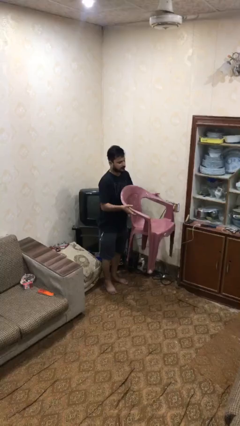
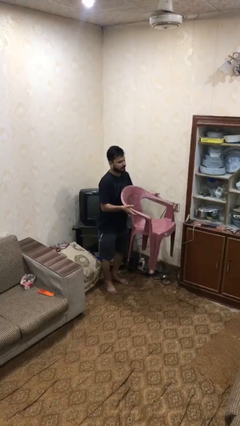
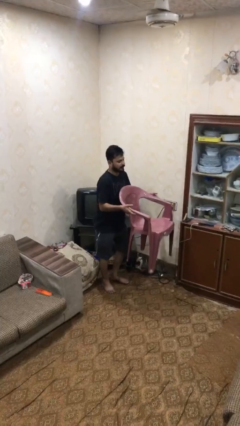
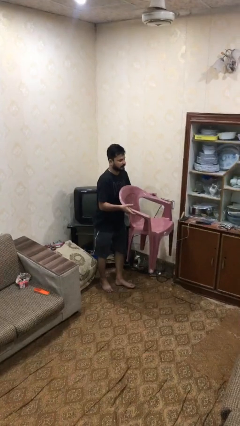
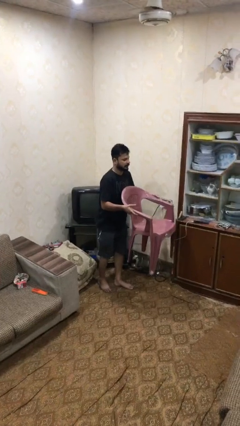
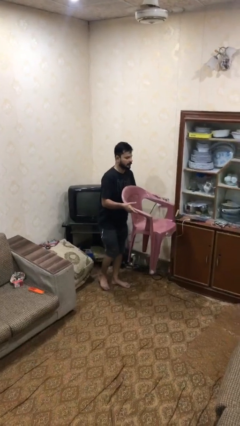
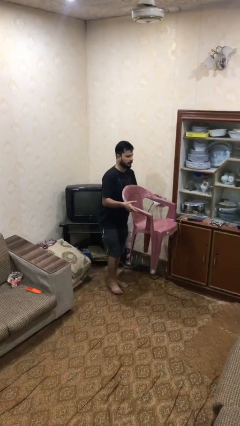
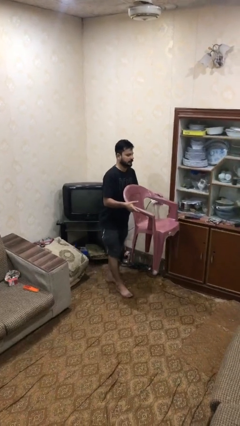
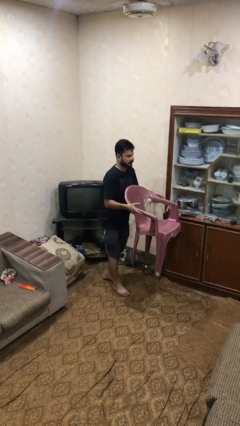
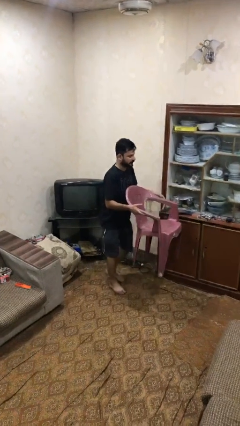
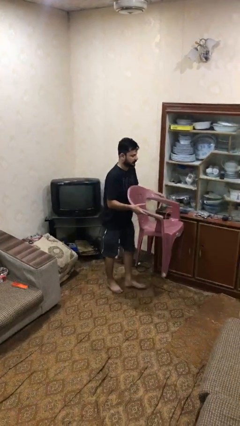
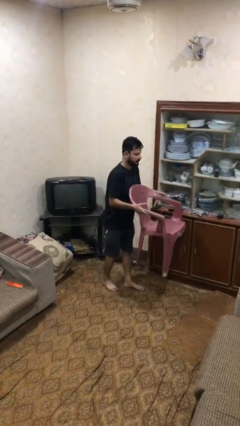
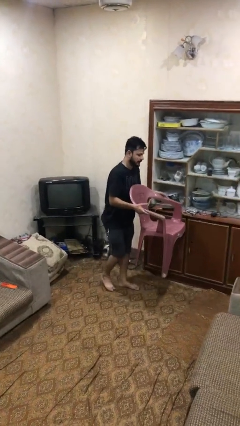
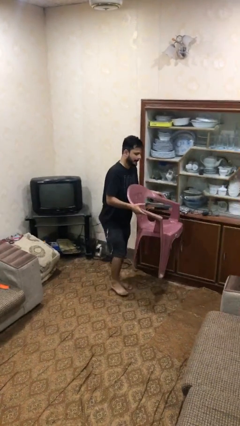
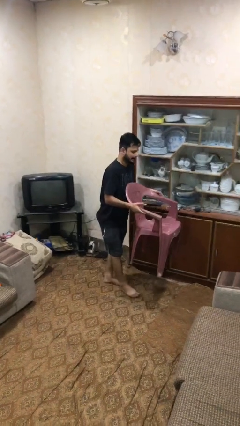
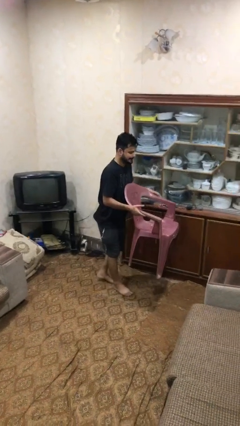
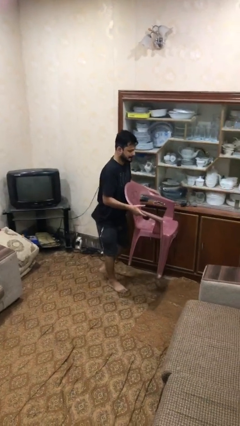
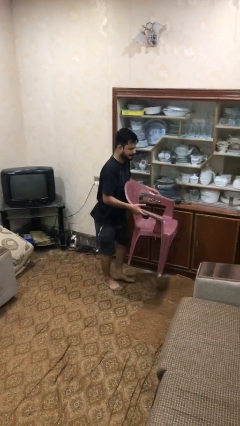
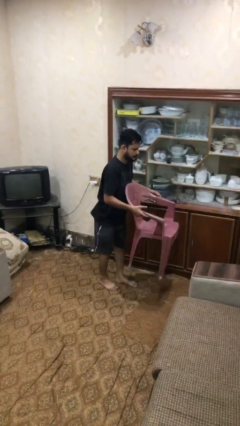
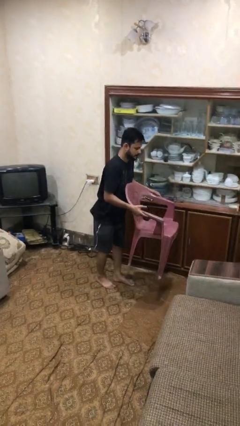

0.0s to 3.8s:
person carries heavy object

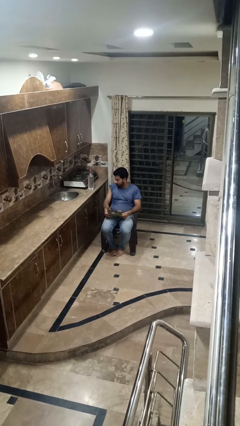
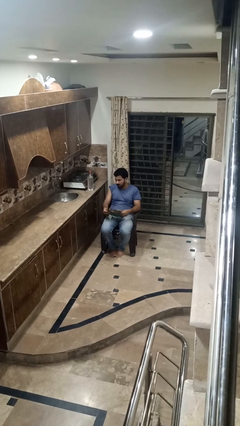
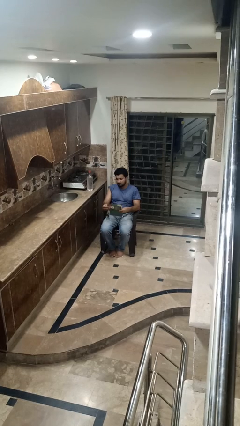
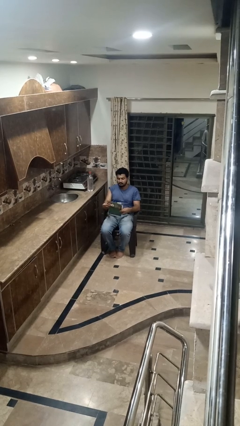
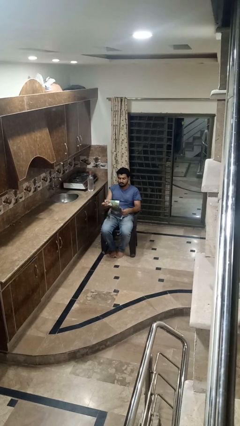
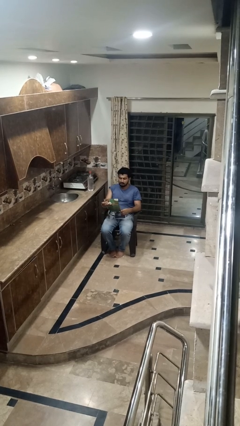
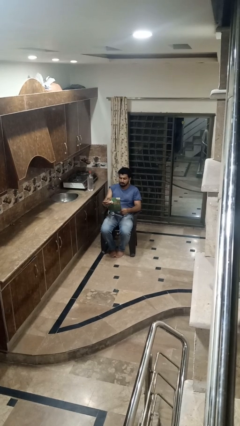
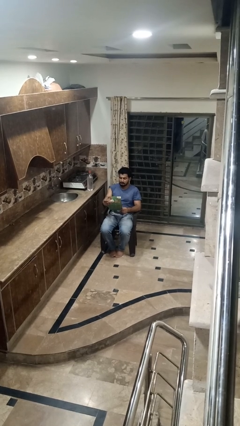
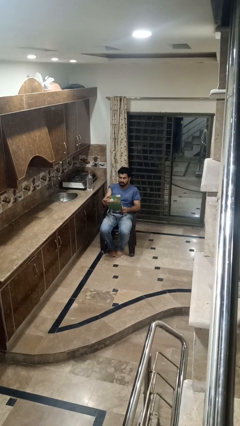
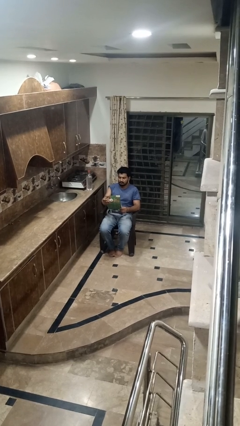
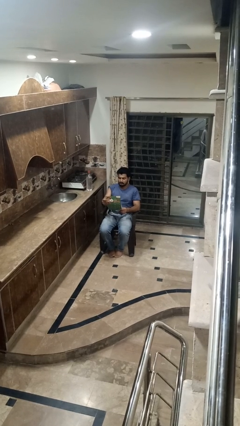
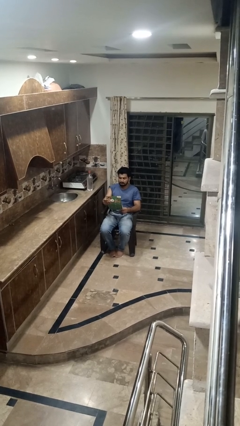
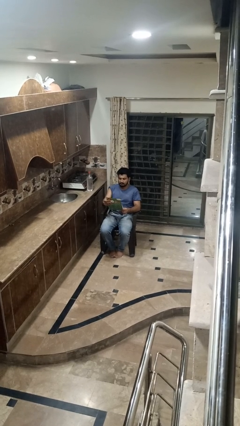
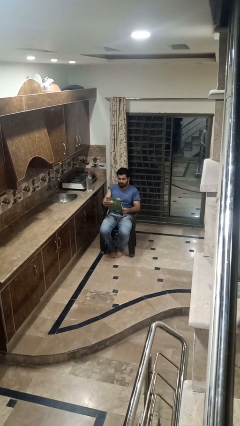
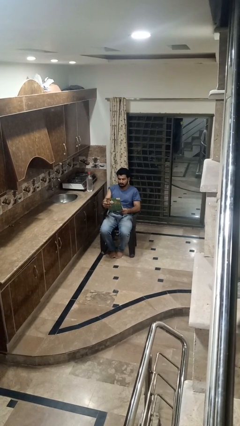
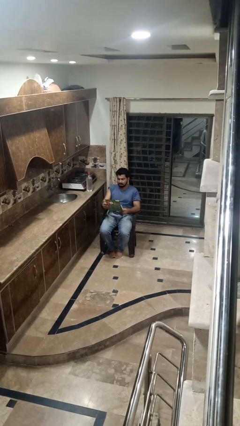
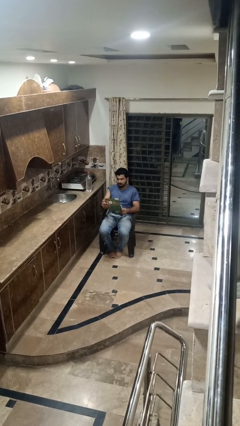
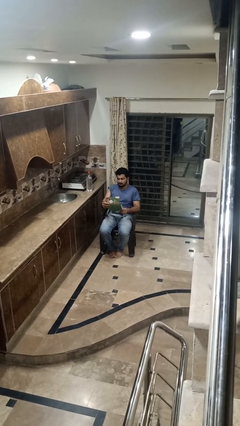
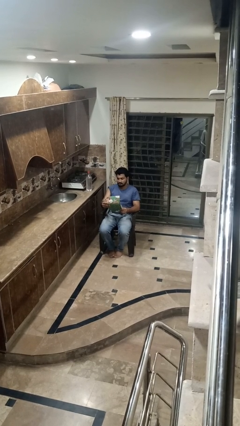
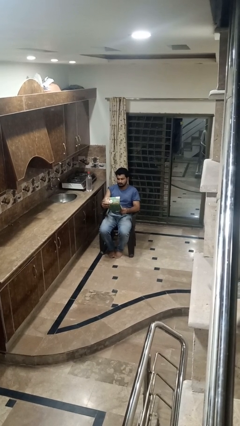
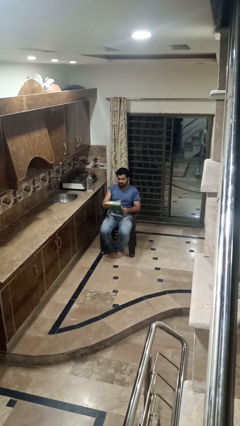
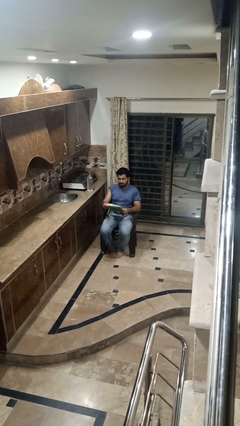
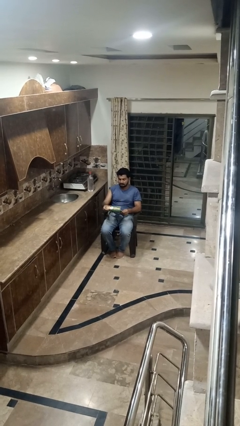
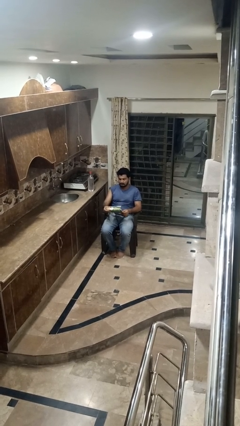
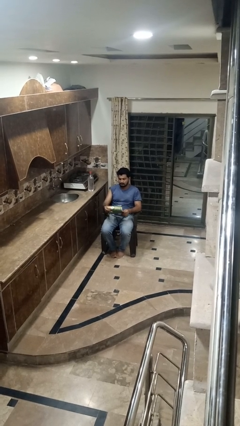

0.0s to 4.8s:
person reads newspaper

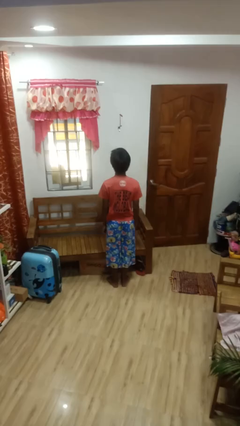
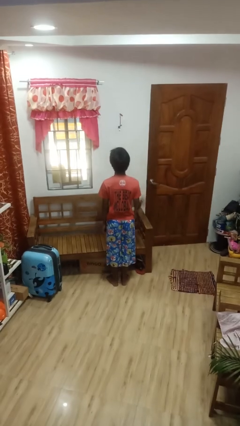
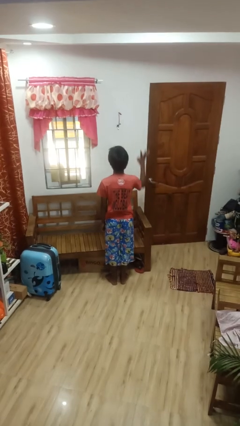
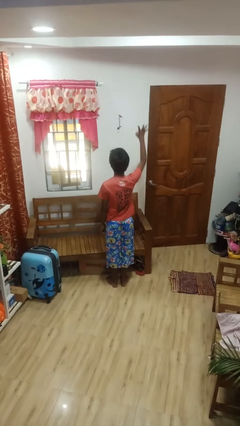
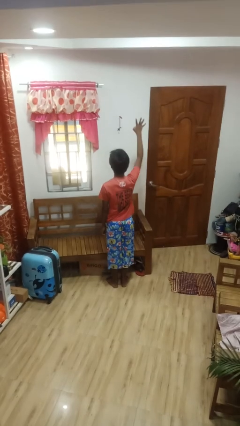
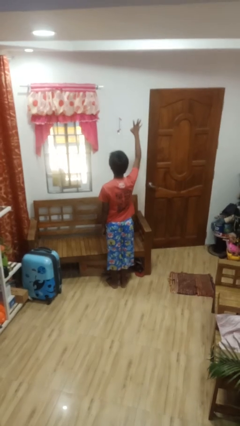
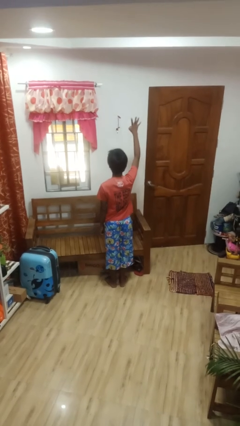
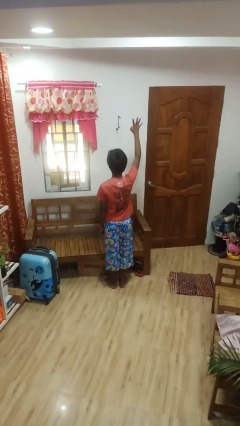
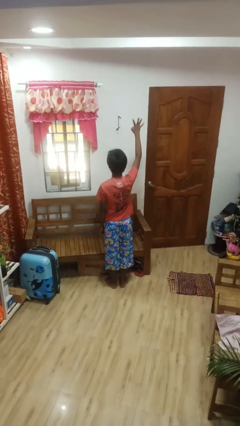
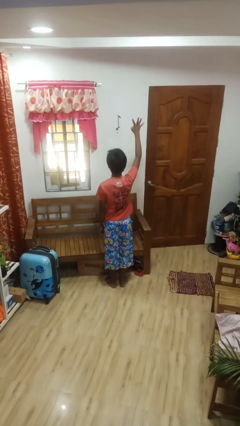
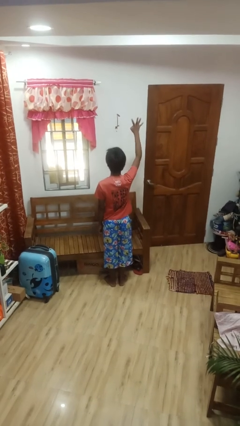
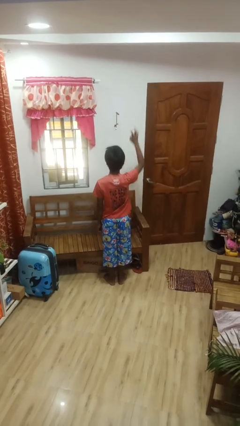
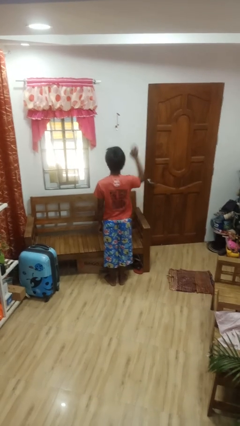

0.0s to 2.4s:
person gestures number four

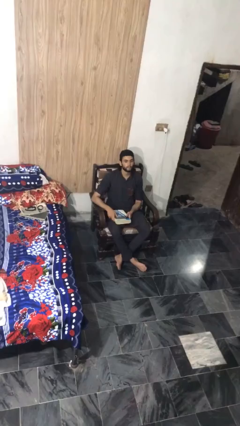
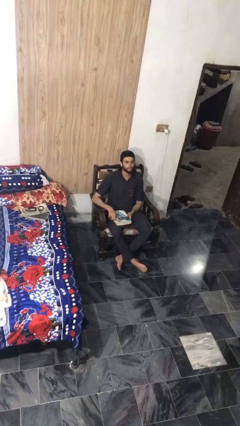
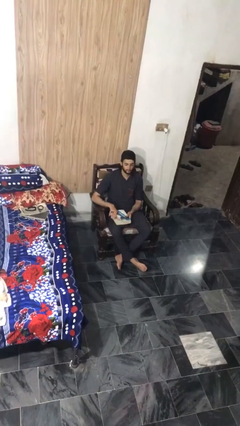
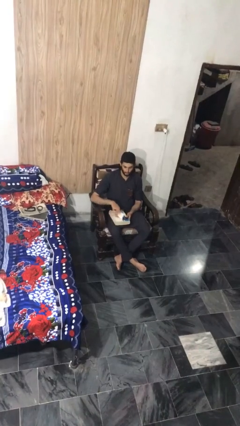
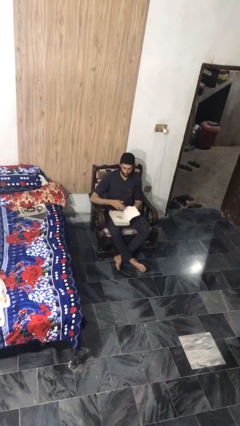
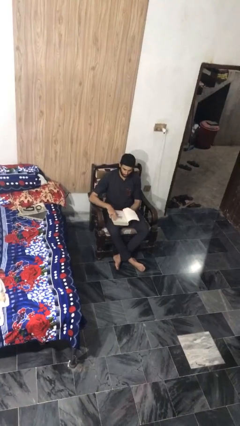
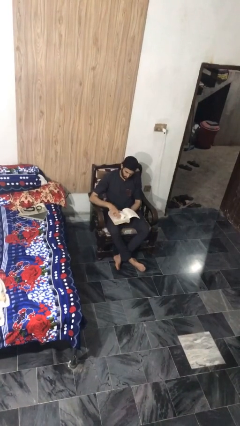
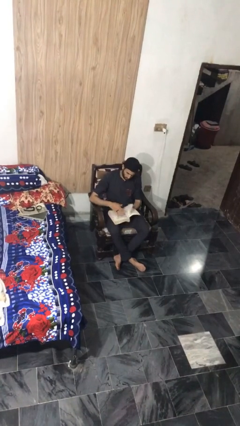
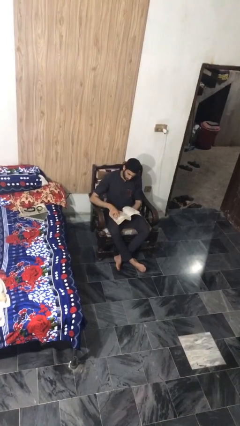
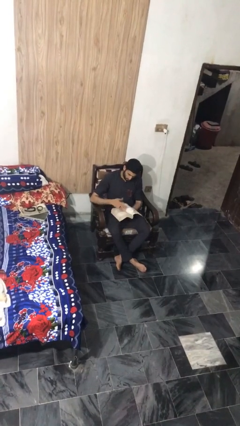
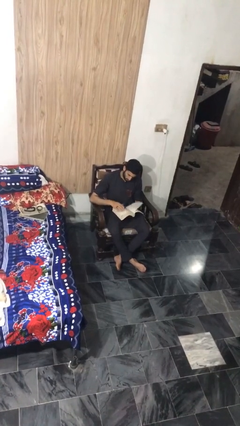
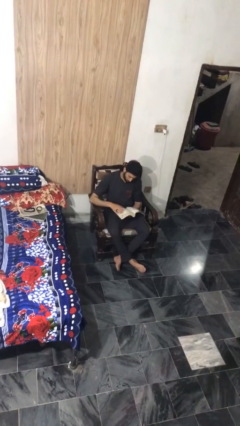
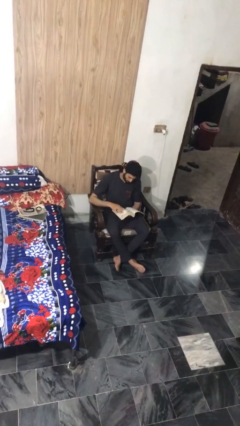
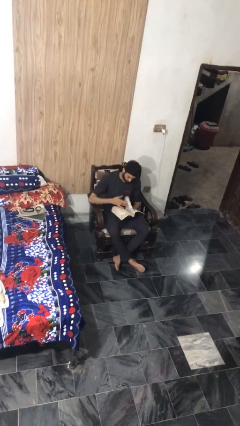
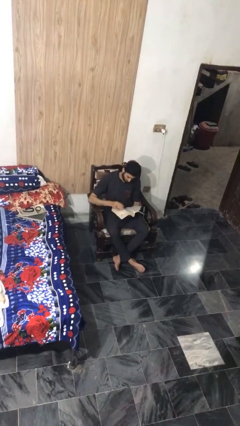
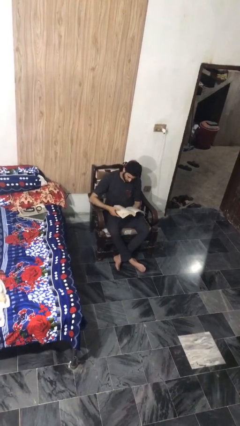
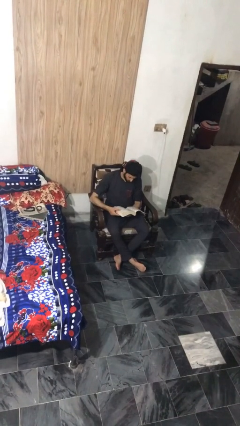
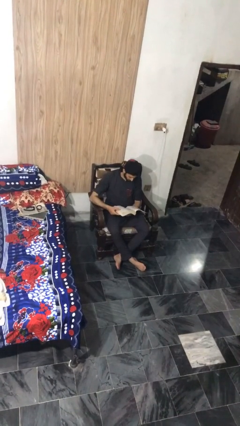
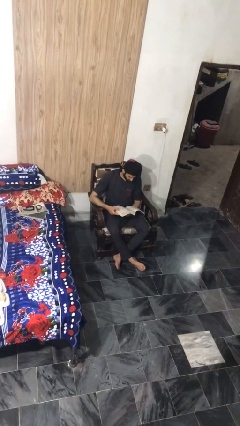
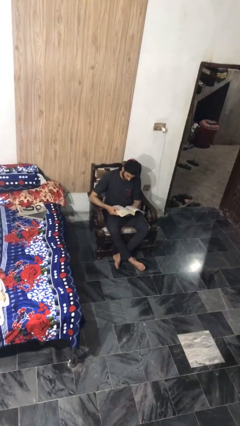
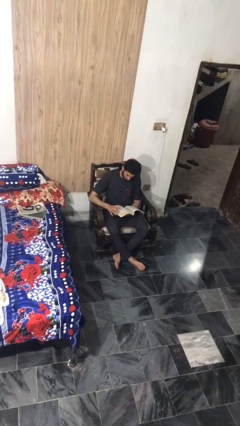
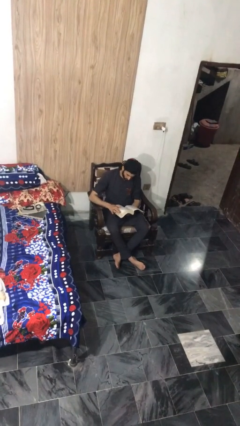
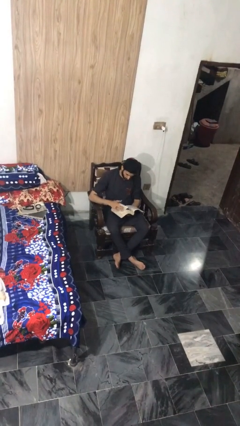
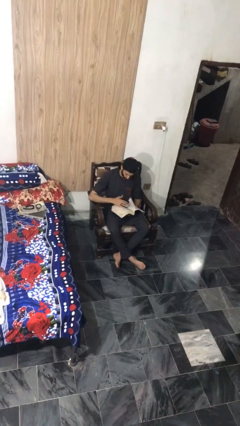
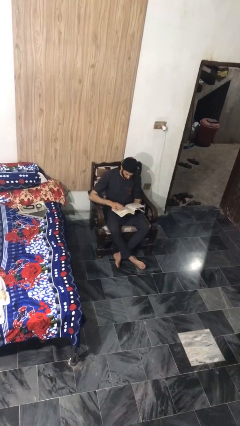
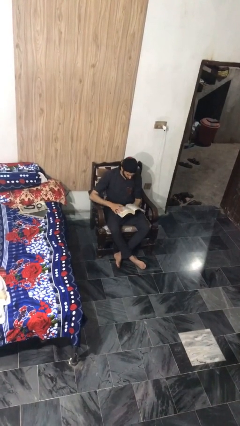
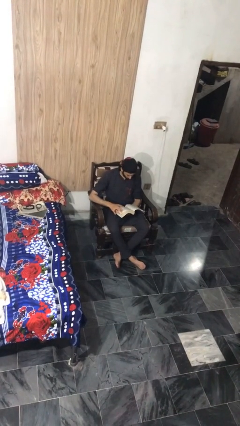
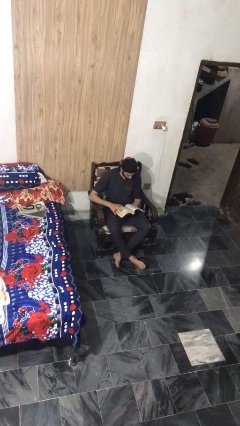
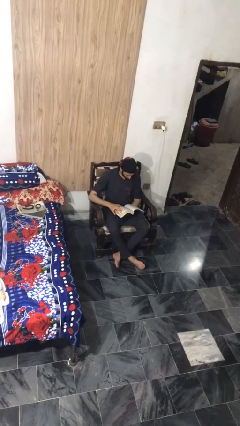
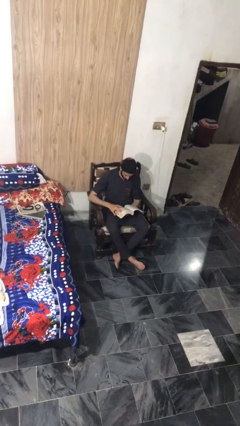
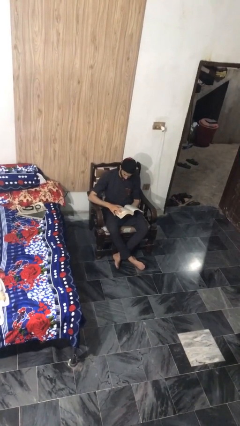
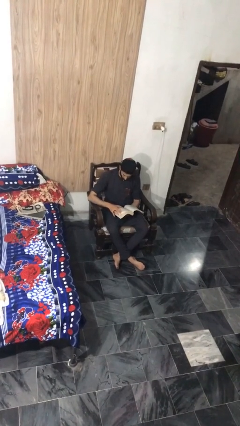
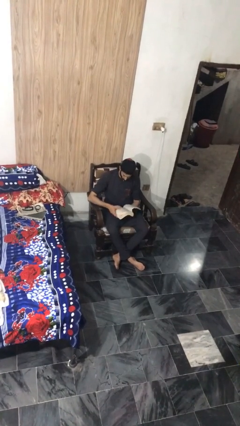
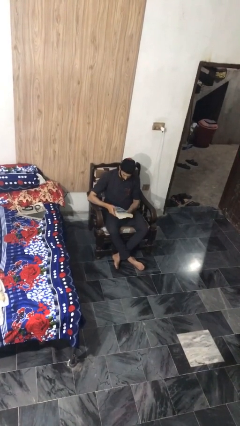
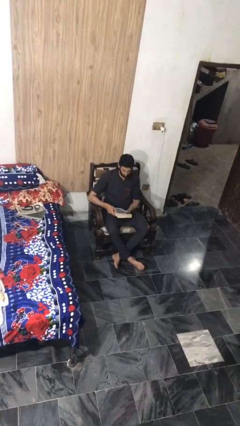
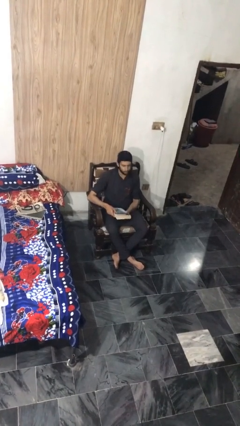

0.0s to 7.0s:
person reads book
